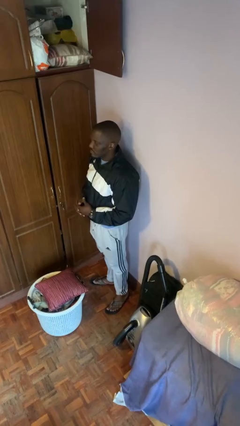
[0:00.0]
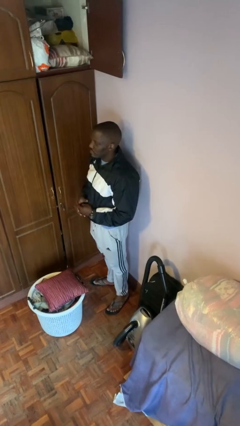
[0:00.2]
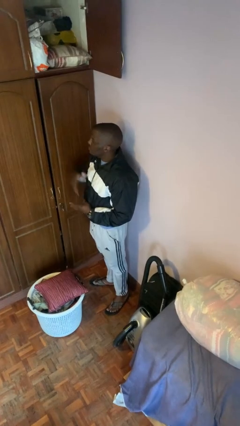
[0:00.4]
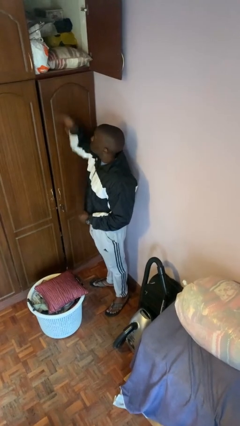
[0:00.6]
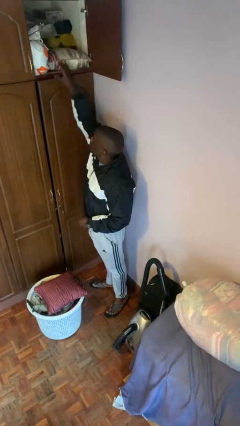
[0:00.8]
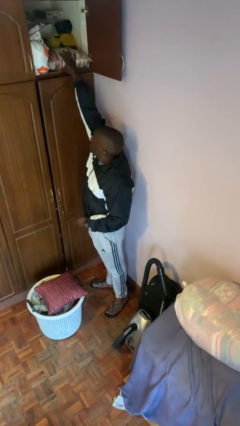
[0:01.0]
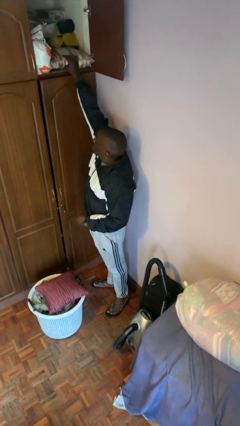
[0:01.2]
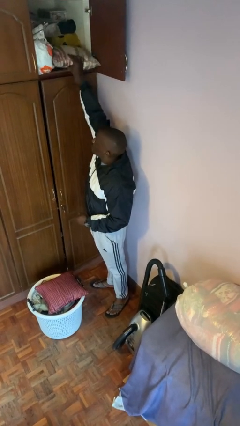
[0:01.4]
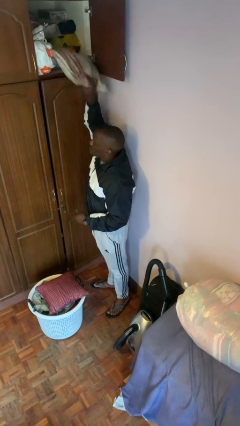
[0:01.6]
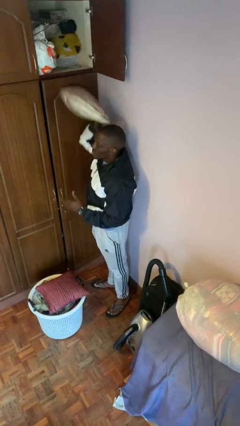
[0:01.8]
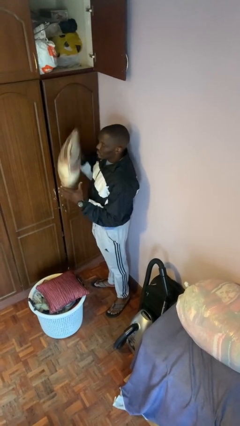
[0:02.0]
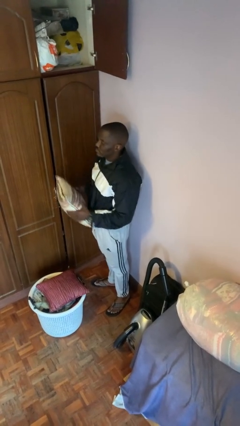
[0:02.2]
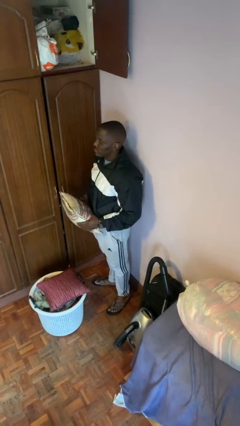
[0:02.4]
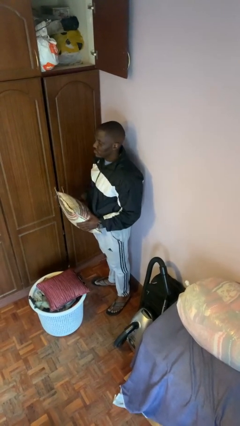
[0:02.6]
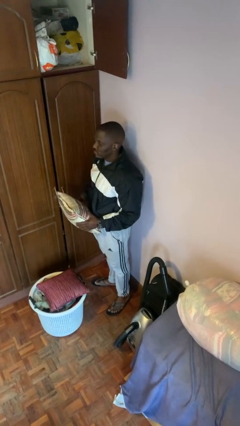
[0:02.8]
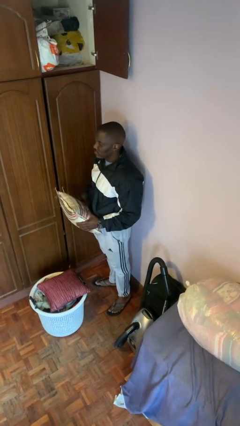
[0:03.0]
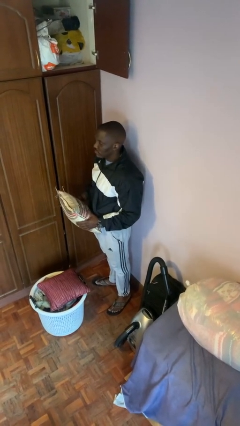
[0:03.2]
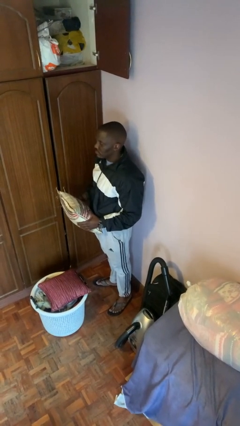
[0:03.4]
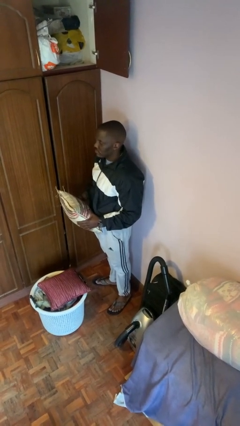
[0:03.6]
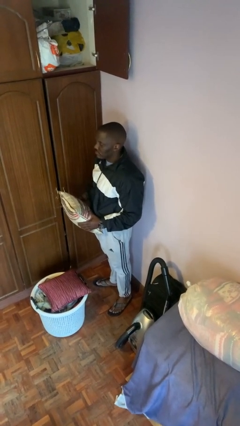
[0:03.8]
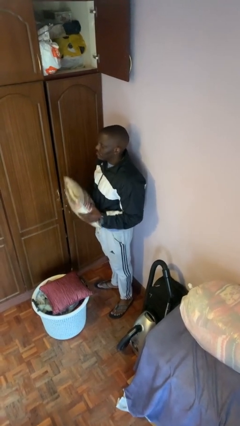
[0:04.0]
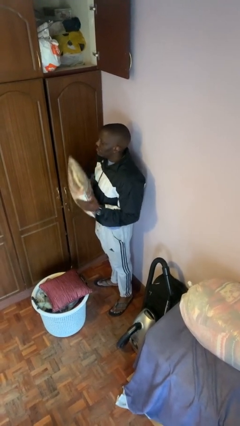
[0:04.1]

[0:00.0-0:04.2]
person picks up object from shelf

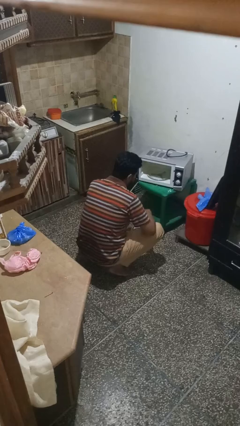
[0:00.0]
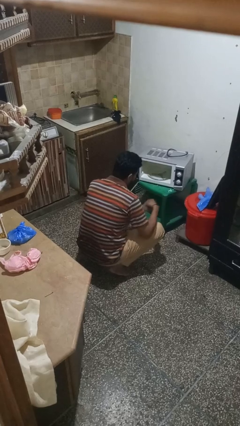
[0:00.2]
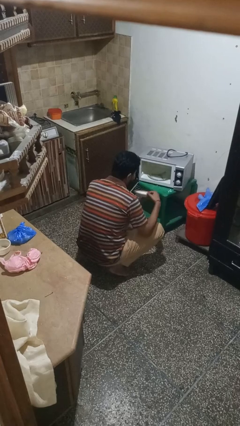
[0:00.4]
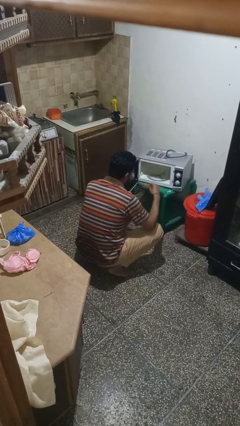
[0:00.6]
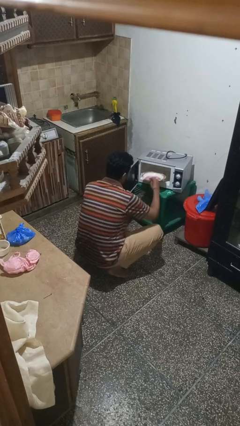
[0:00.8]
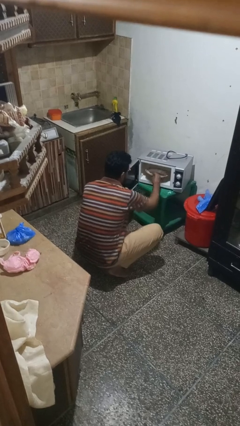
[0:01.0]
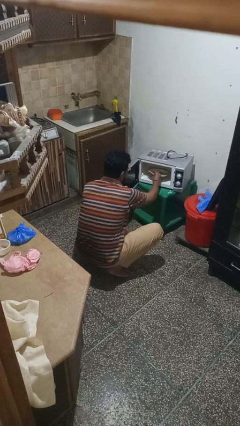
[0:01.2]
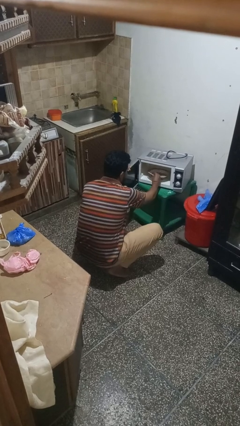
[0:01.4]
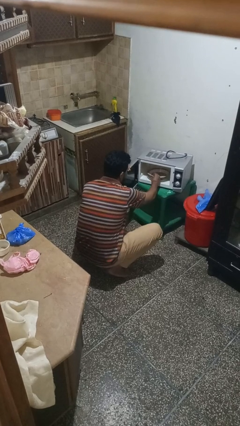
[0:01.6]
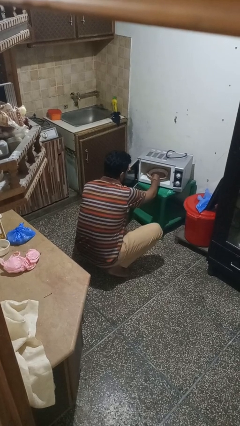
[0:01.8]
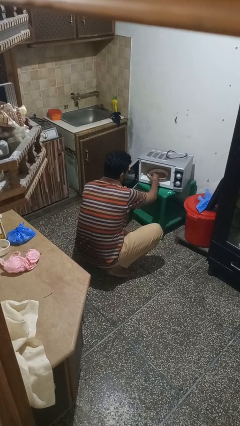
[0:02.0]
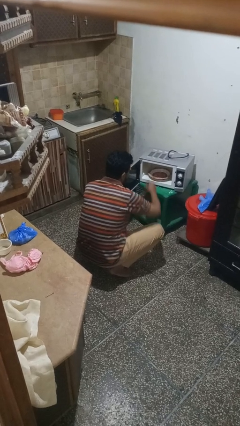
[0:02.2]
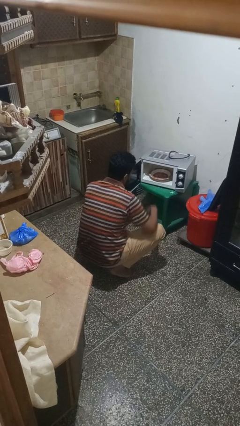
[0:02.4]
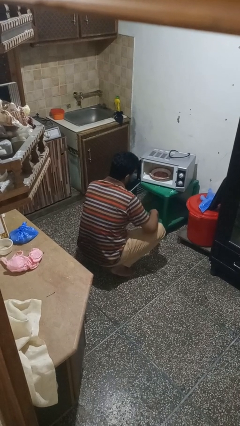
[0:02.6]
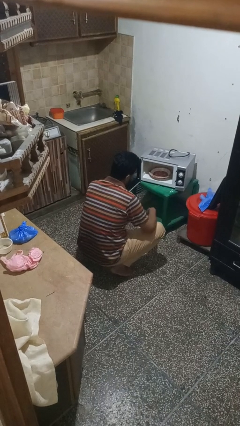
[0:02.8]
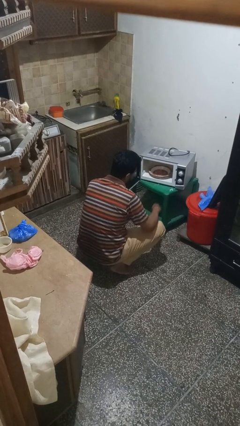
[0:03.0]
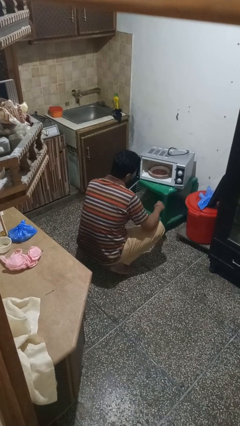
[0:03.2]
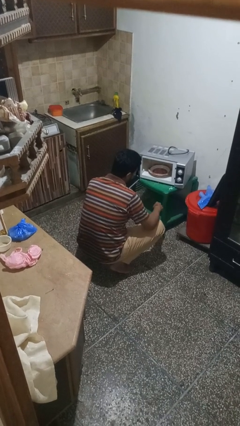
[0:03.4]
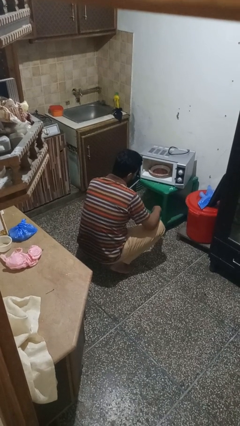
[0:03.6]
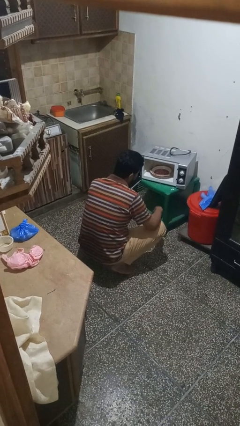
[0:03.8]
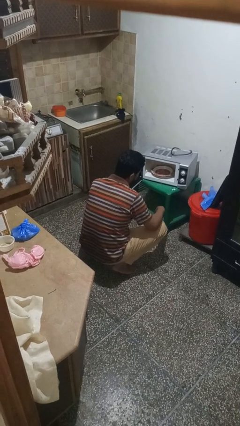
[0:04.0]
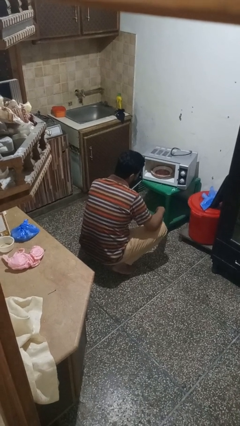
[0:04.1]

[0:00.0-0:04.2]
person puts object into microwave

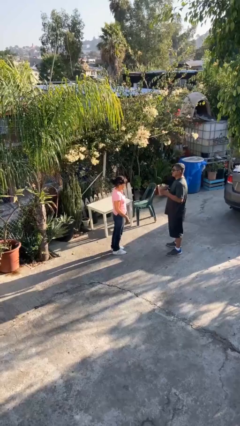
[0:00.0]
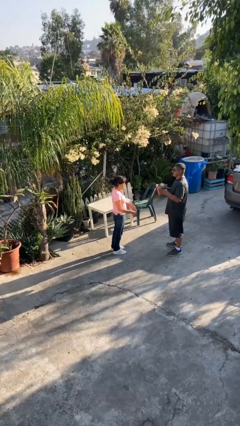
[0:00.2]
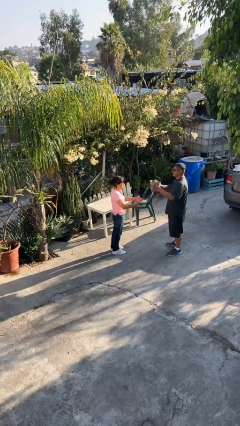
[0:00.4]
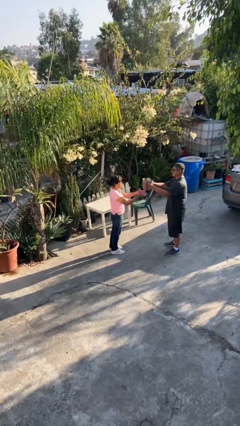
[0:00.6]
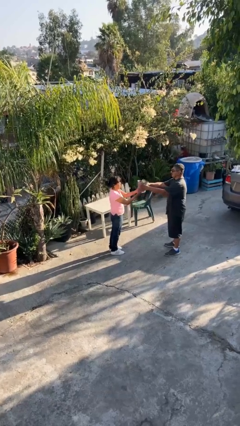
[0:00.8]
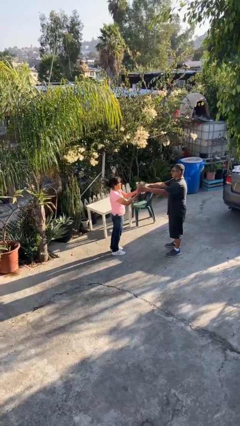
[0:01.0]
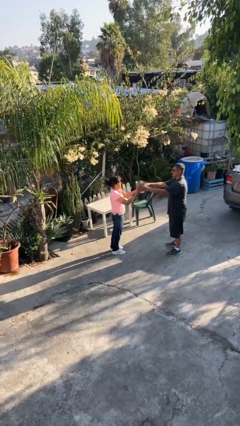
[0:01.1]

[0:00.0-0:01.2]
person transfers object to person

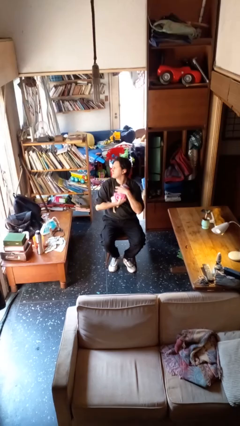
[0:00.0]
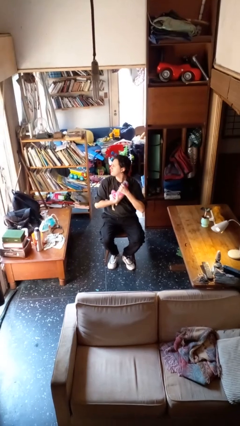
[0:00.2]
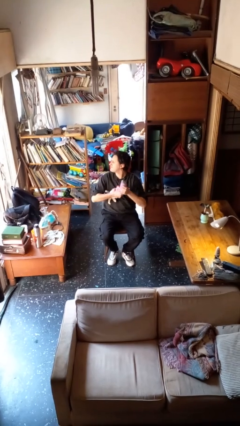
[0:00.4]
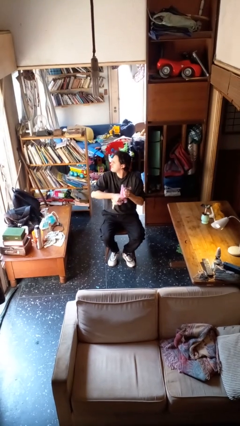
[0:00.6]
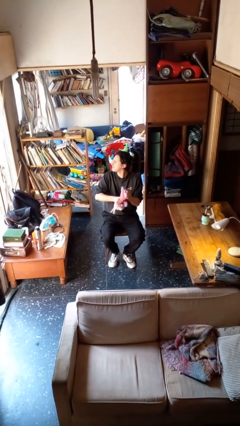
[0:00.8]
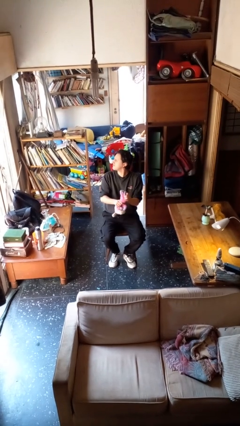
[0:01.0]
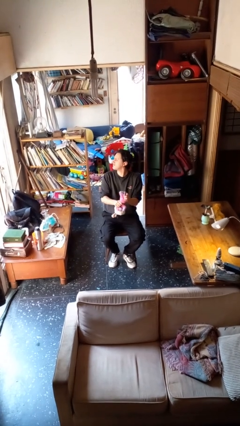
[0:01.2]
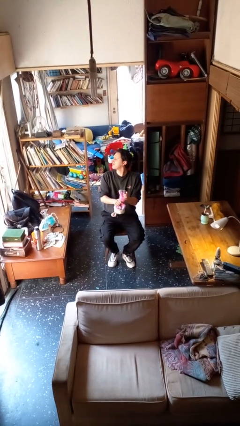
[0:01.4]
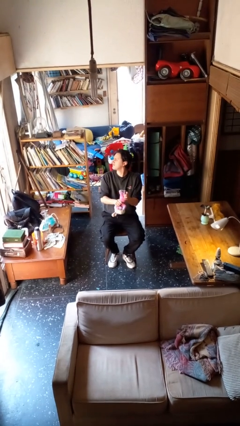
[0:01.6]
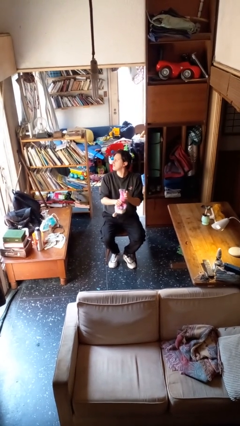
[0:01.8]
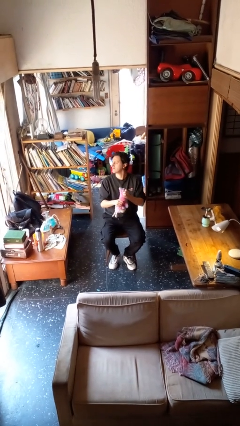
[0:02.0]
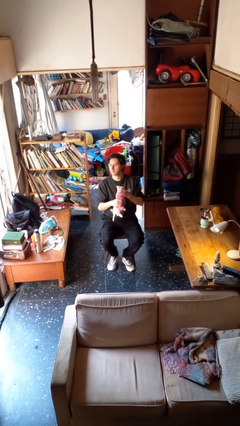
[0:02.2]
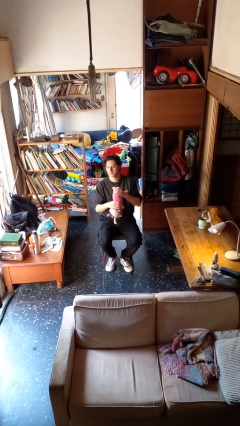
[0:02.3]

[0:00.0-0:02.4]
person squeezes object

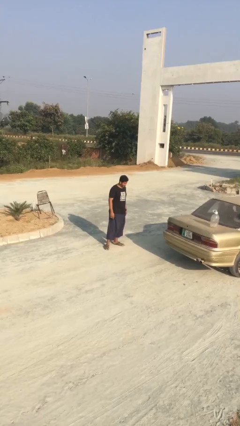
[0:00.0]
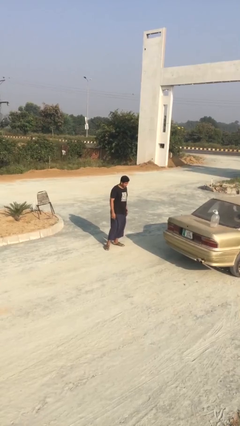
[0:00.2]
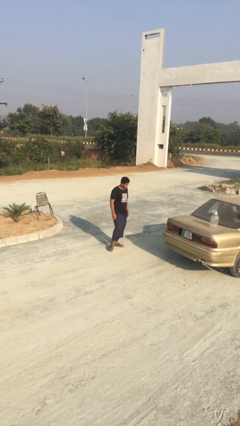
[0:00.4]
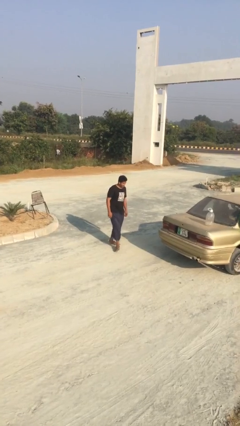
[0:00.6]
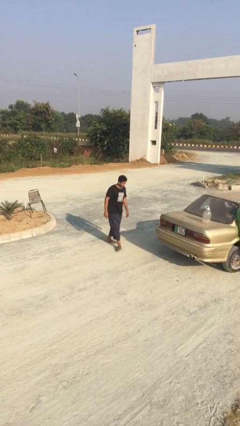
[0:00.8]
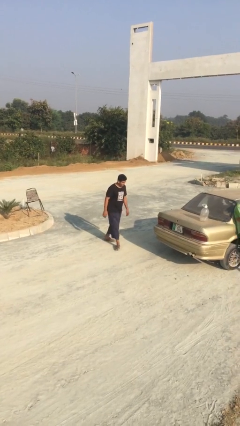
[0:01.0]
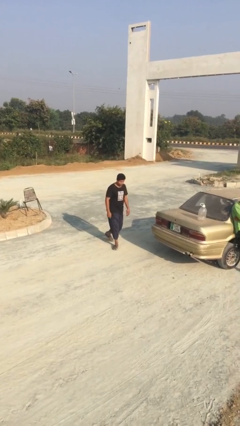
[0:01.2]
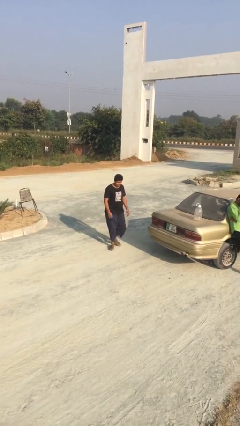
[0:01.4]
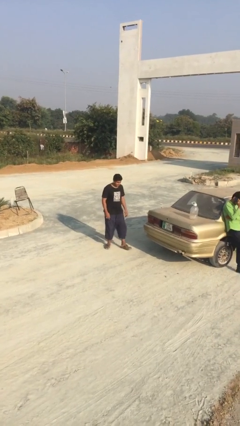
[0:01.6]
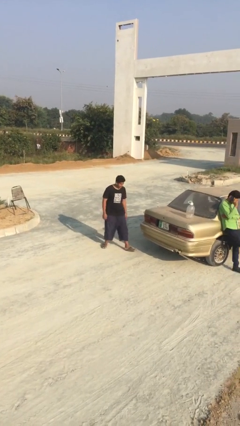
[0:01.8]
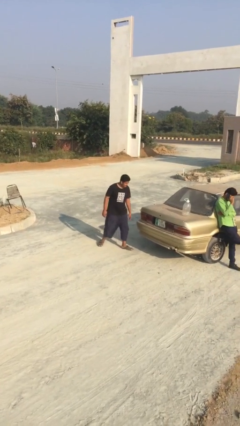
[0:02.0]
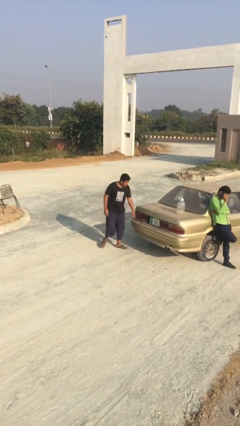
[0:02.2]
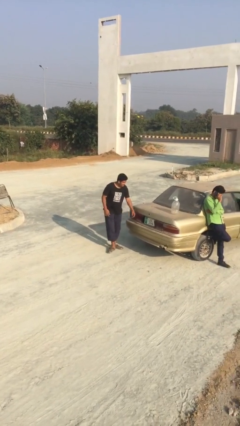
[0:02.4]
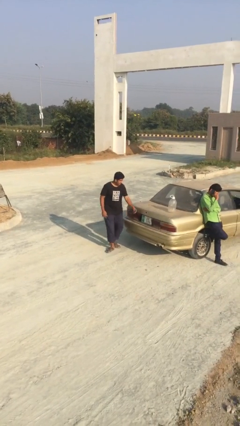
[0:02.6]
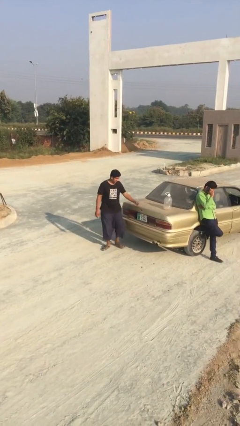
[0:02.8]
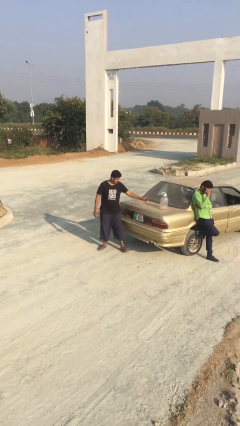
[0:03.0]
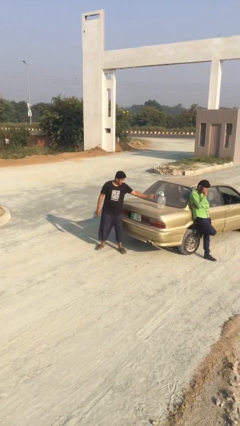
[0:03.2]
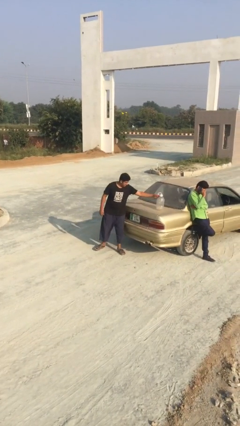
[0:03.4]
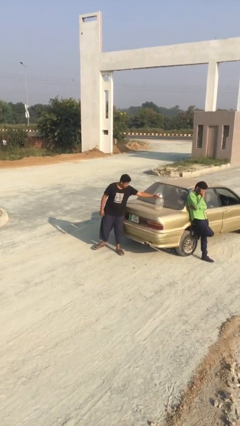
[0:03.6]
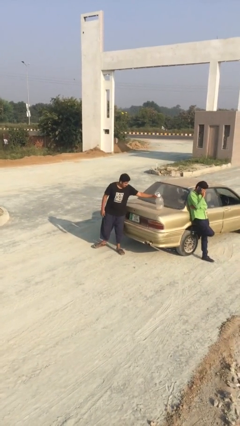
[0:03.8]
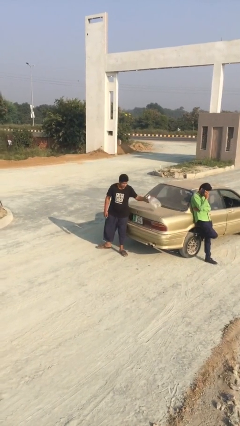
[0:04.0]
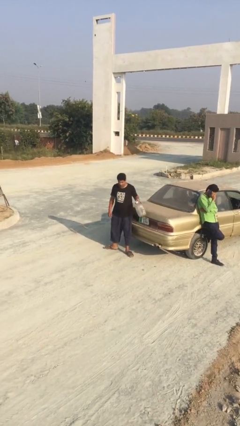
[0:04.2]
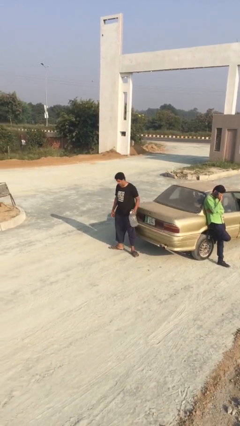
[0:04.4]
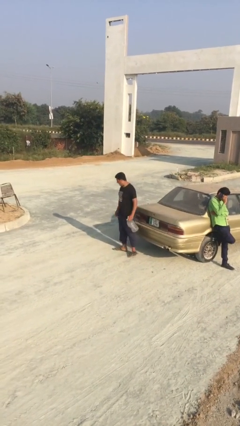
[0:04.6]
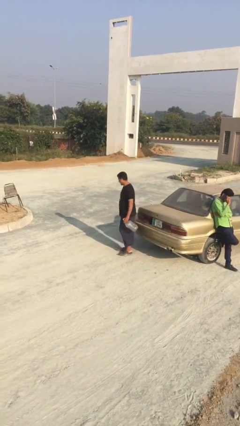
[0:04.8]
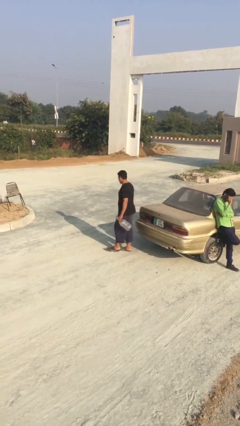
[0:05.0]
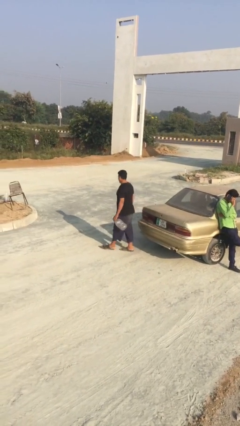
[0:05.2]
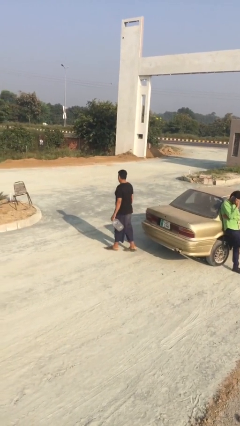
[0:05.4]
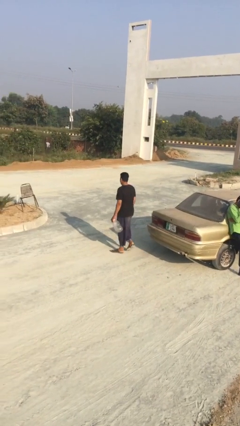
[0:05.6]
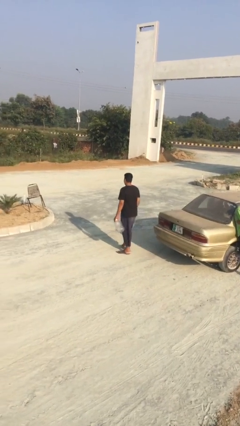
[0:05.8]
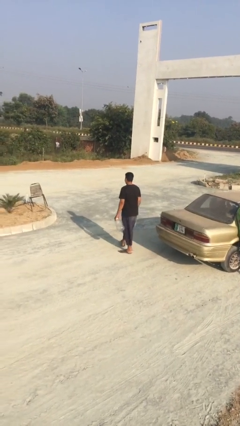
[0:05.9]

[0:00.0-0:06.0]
person steals object from person
